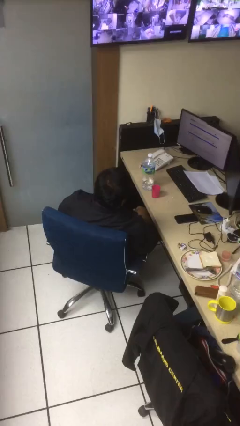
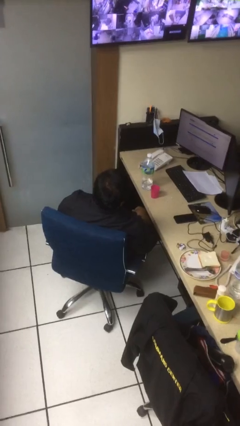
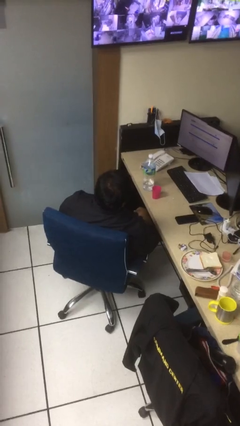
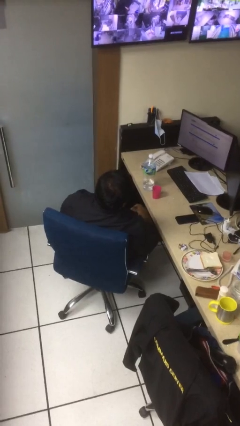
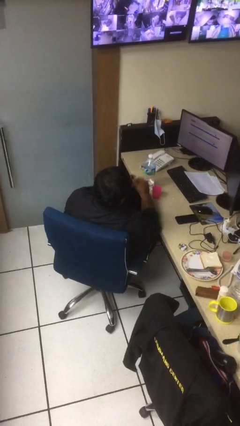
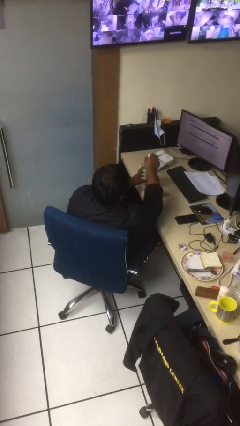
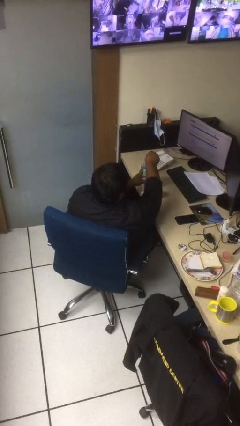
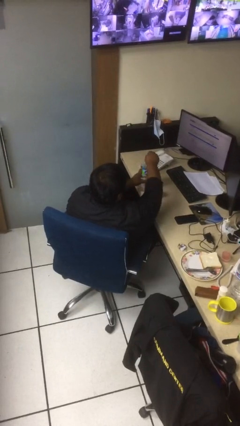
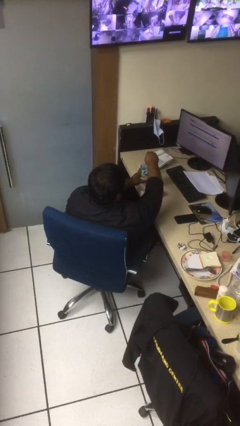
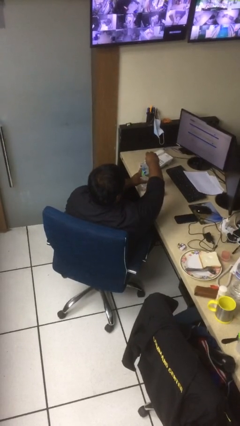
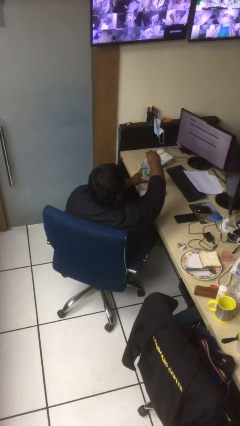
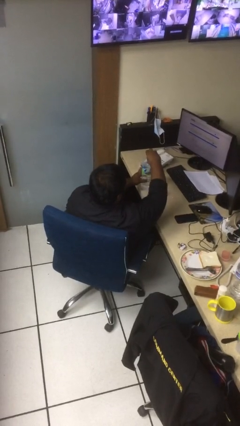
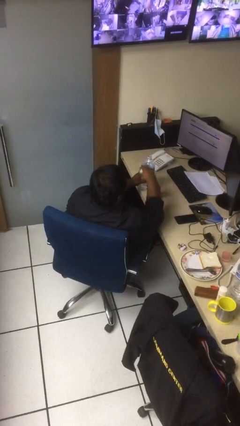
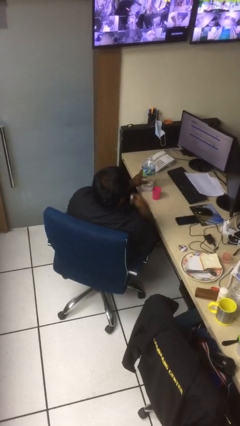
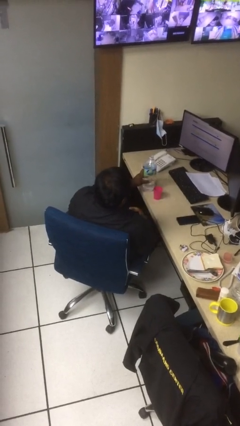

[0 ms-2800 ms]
person unscrews lid from bottle

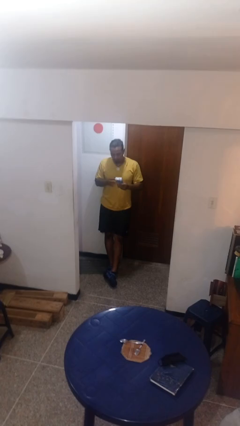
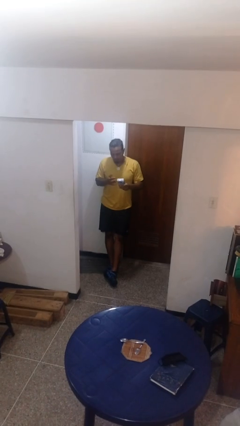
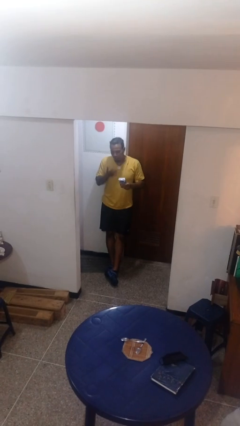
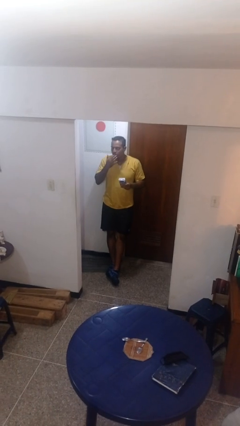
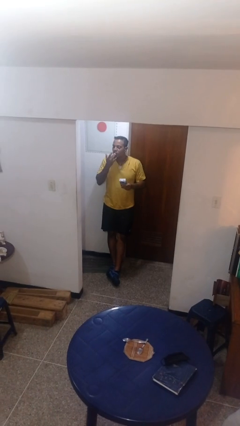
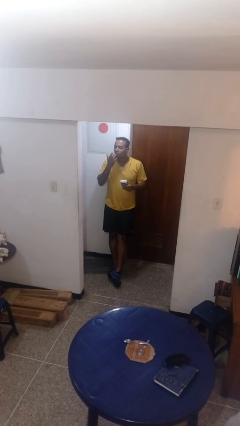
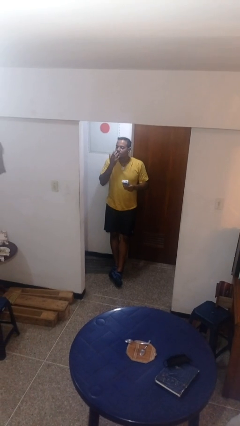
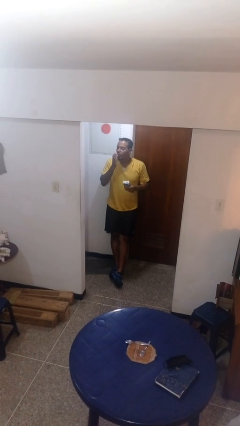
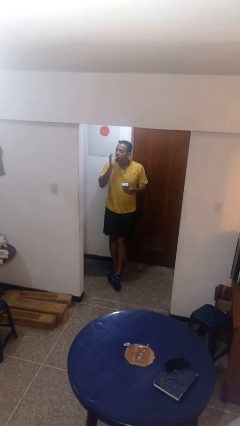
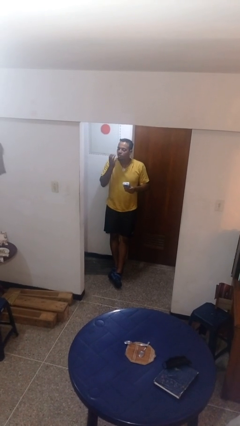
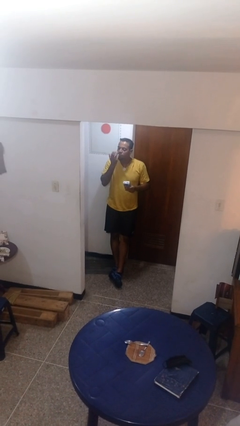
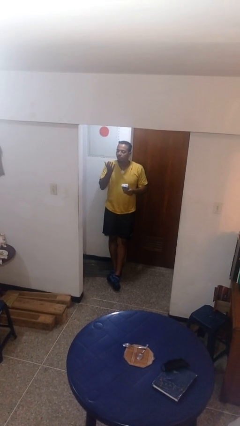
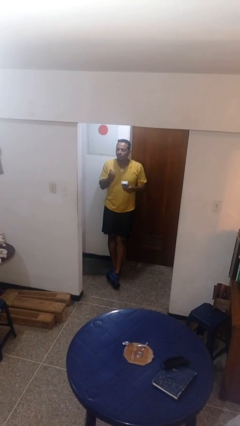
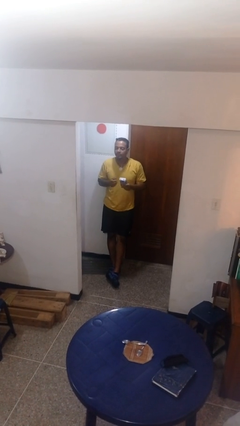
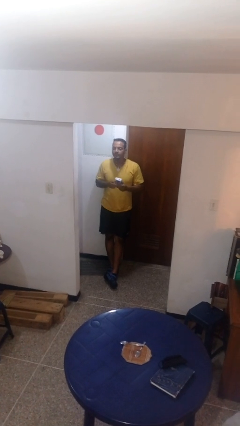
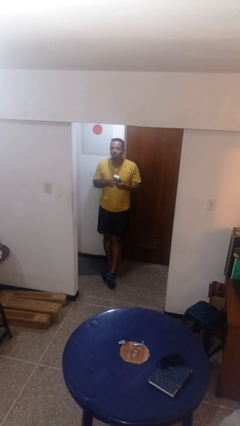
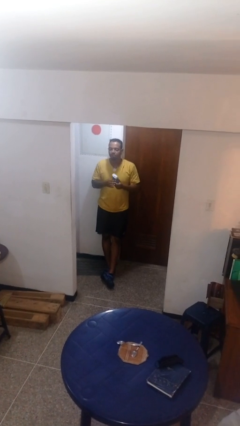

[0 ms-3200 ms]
person licks fingers

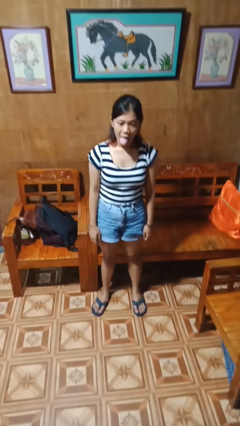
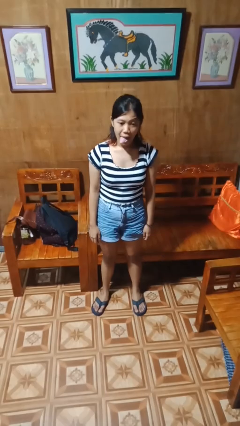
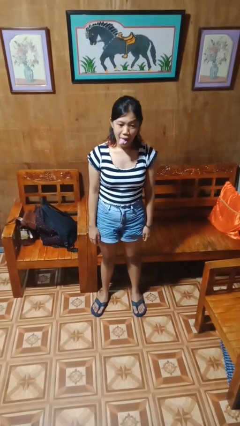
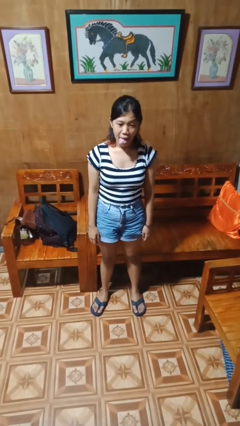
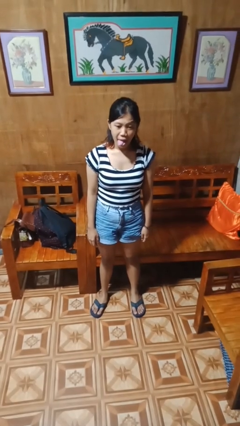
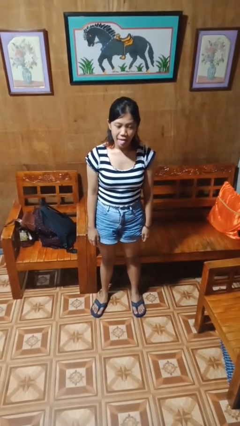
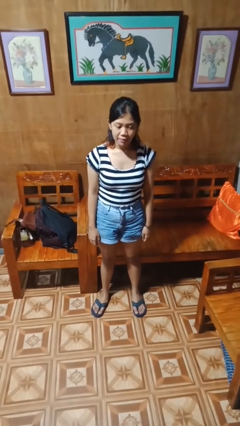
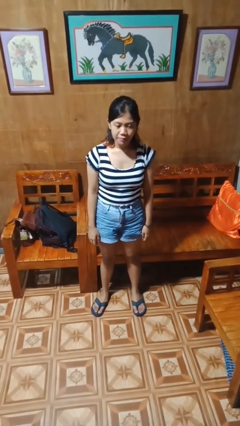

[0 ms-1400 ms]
person sticks out tongue

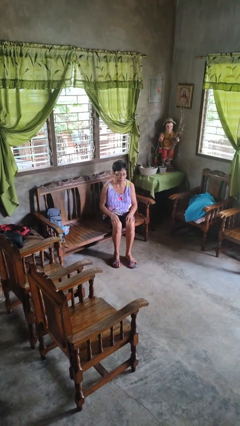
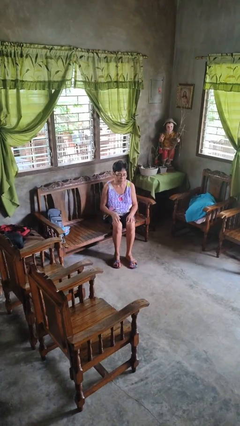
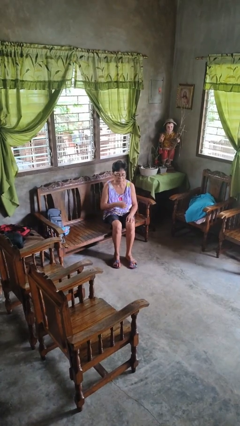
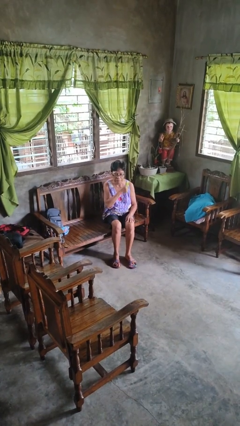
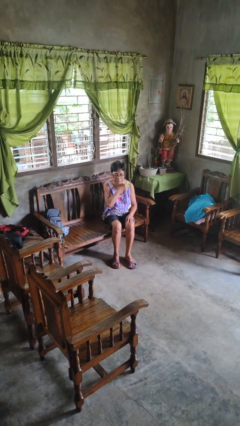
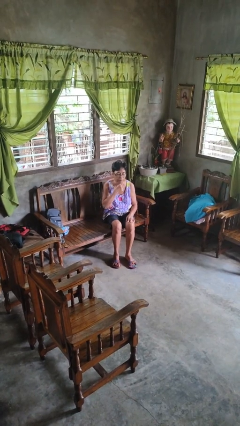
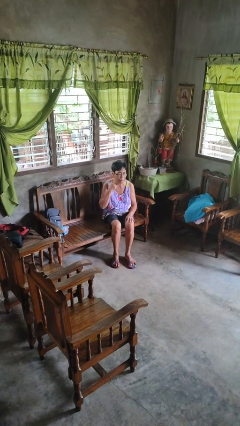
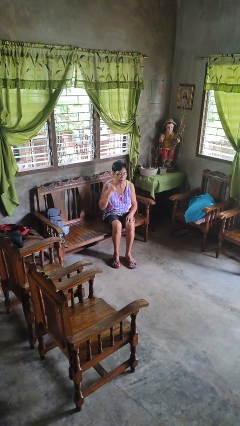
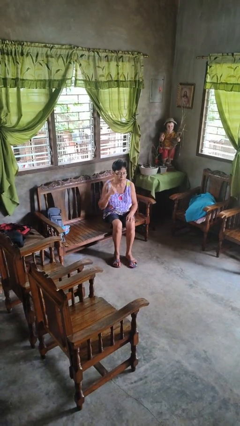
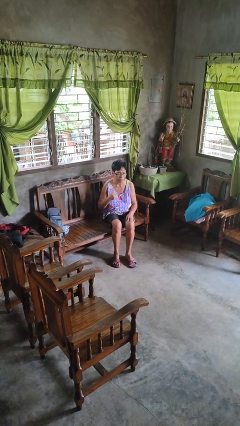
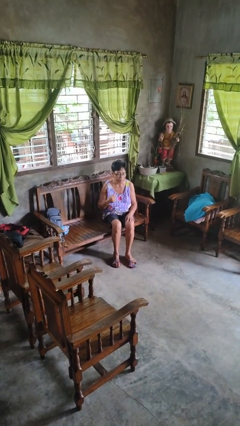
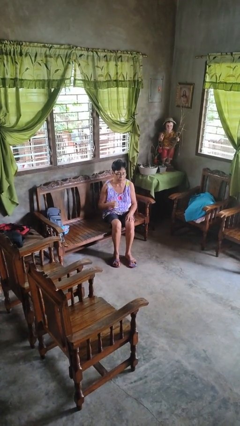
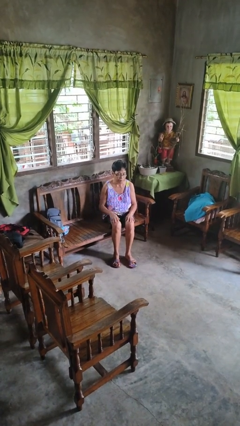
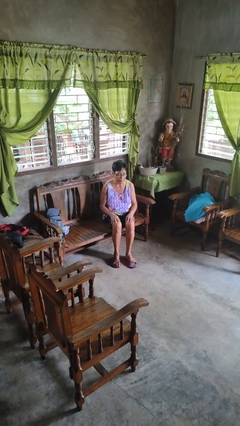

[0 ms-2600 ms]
person gestures cut

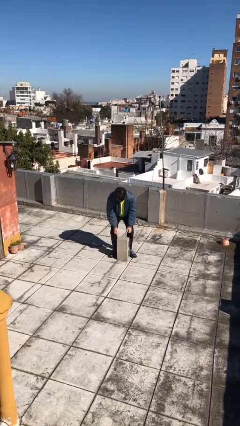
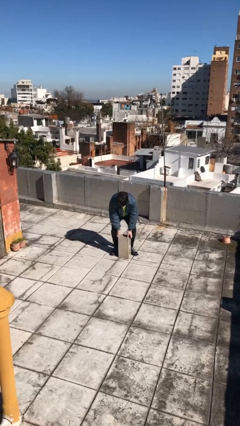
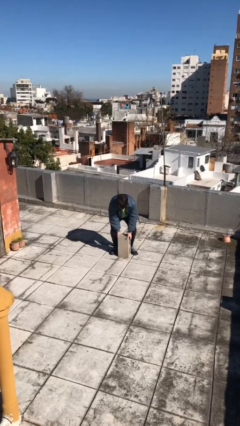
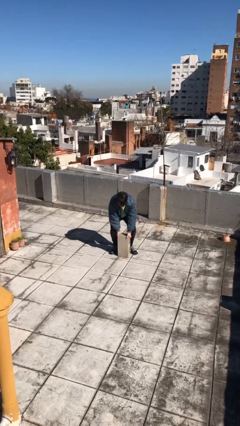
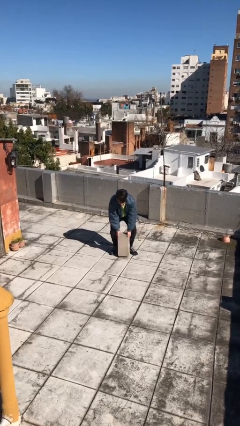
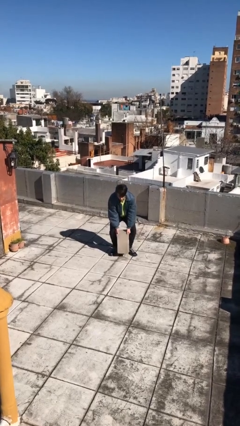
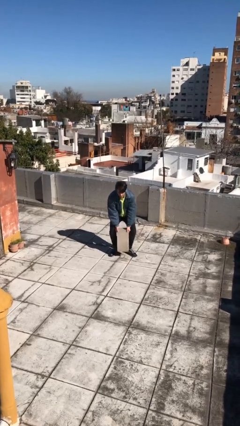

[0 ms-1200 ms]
person picks up object from floor

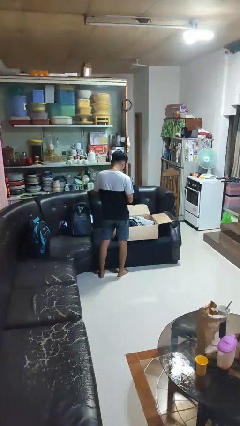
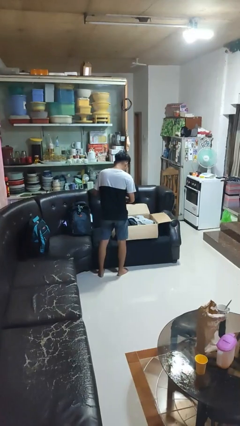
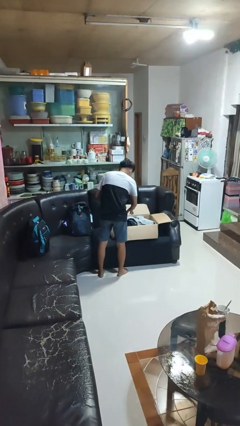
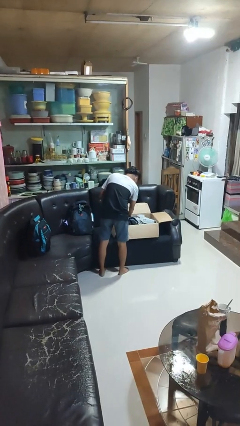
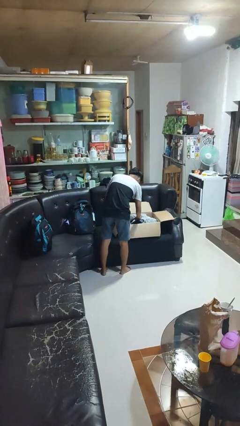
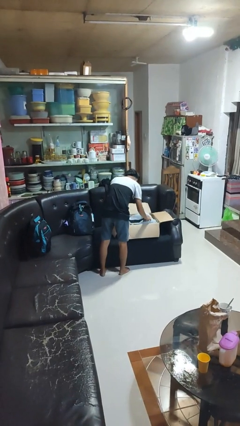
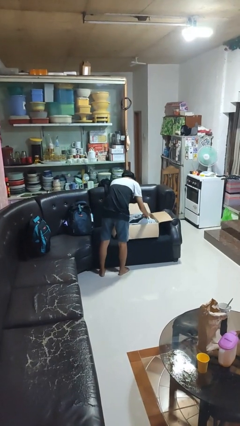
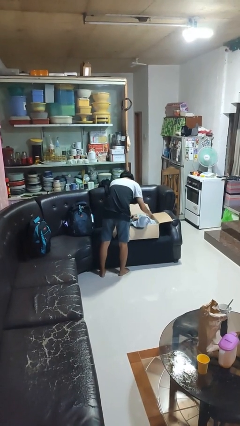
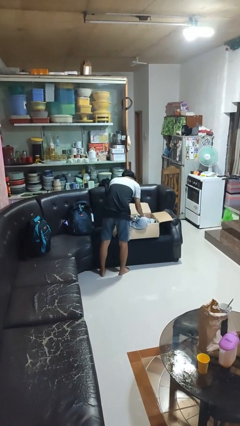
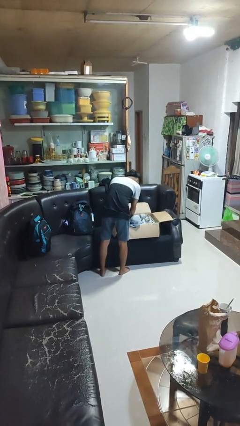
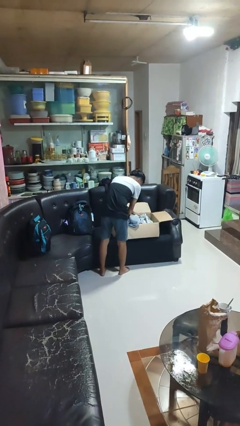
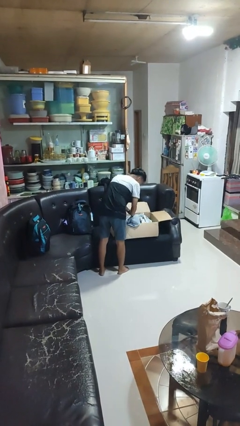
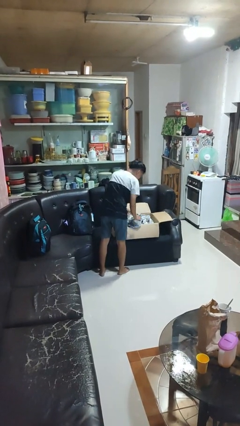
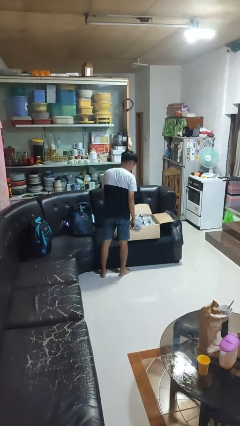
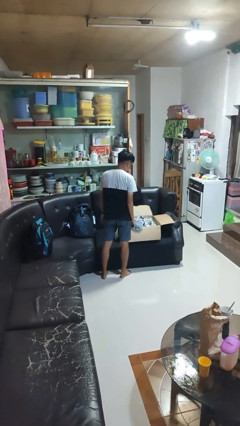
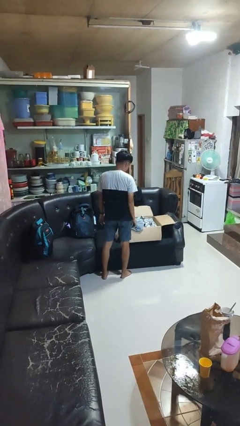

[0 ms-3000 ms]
person searches in box

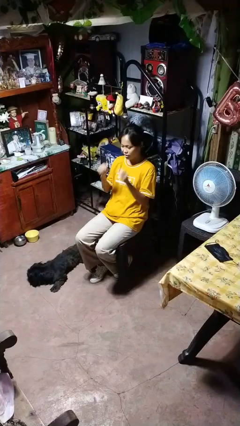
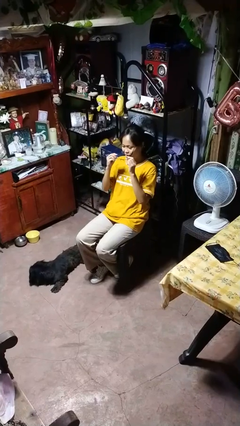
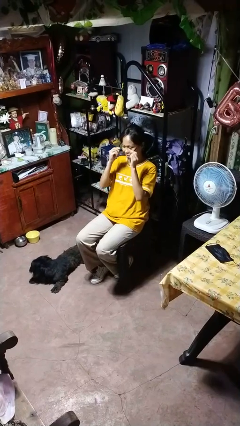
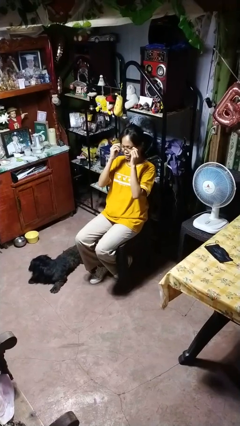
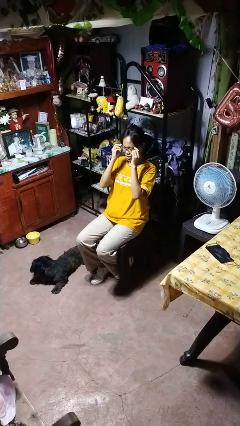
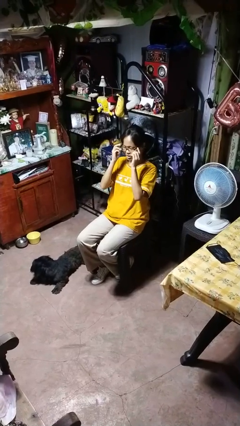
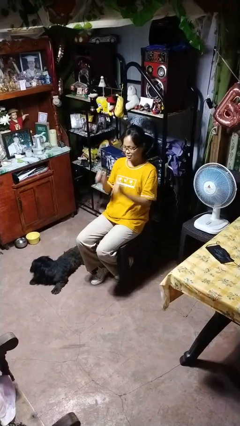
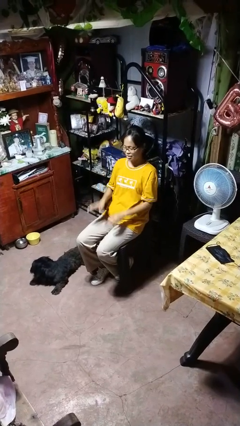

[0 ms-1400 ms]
person puts on glasses

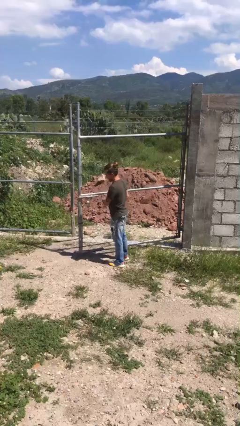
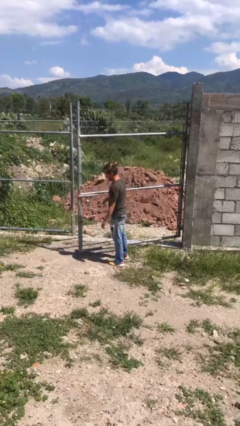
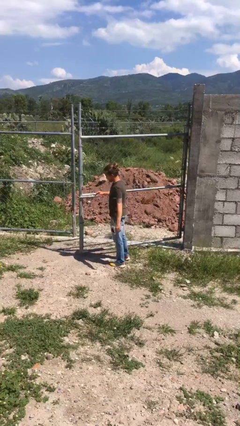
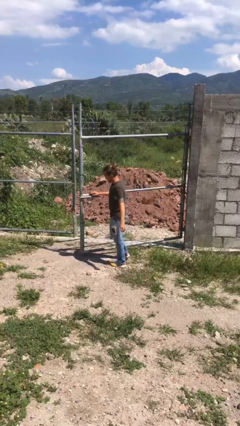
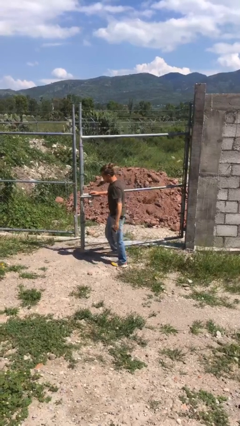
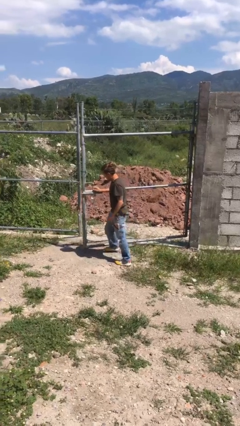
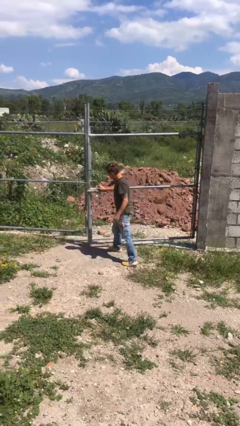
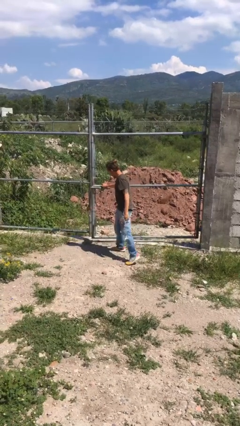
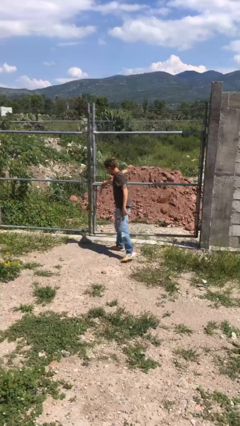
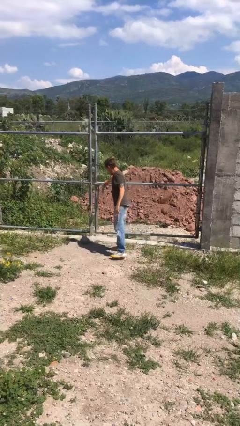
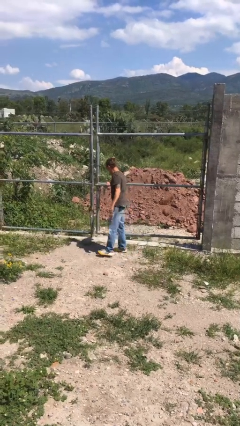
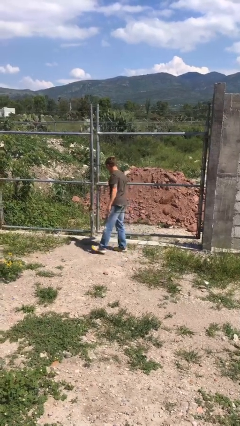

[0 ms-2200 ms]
person closes gate
